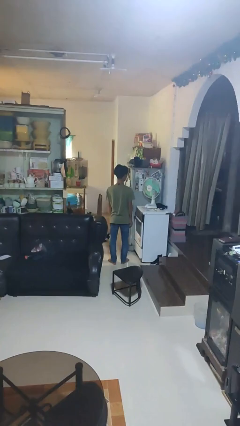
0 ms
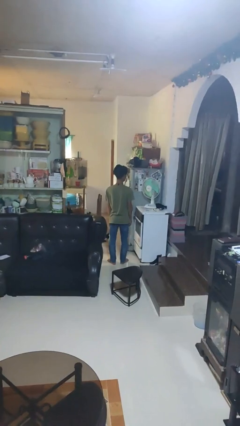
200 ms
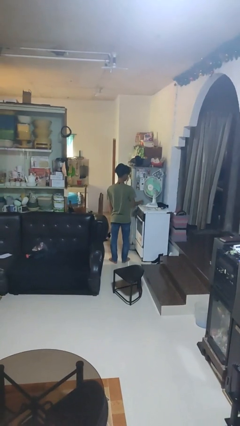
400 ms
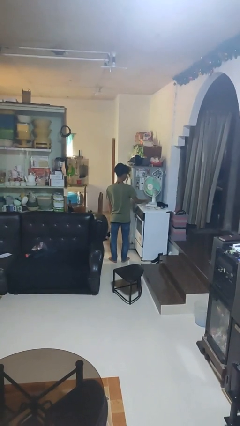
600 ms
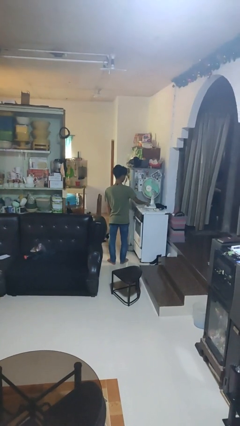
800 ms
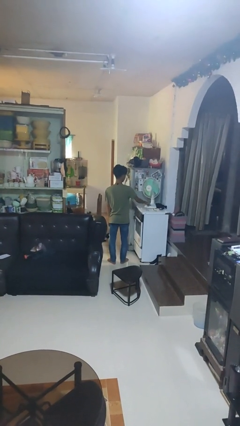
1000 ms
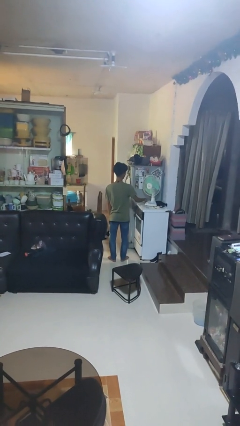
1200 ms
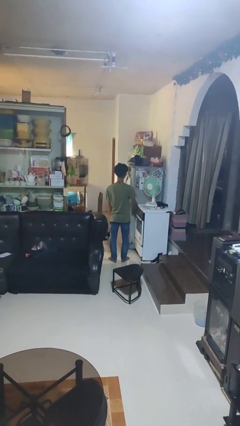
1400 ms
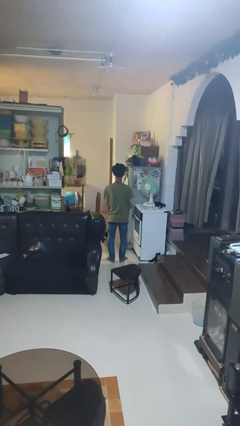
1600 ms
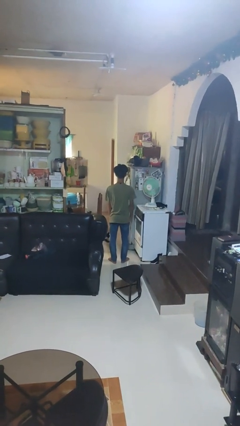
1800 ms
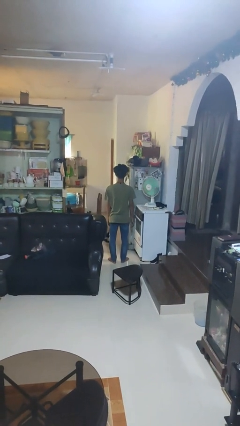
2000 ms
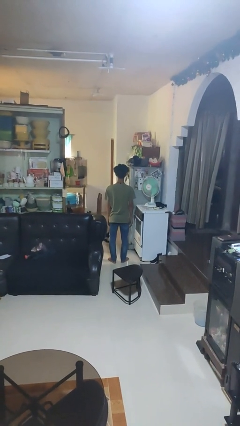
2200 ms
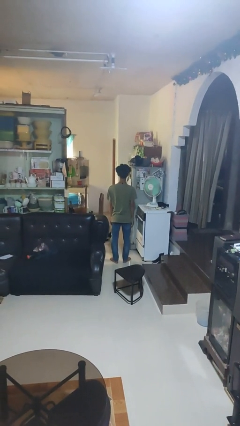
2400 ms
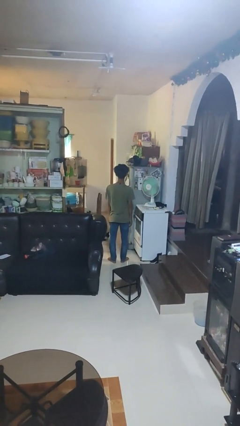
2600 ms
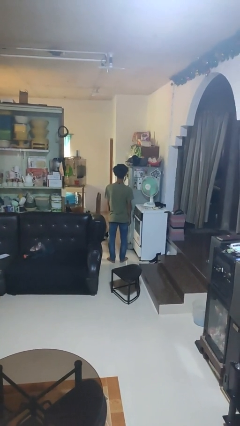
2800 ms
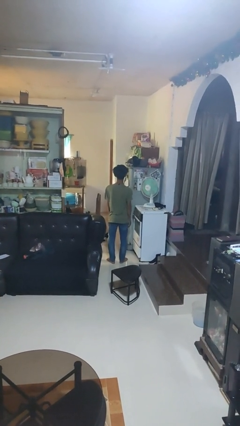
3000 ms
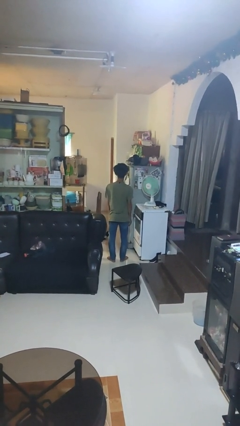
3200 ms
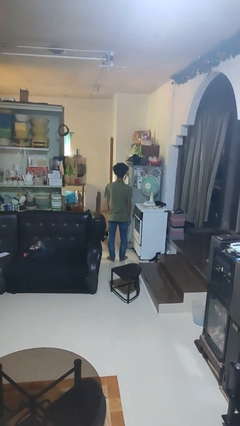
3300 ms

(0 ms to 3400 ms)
person turns on fan

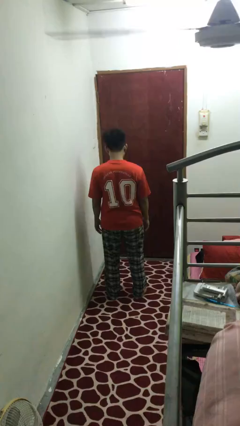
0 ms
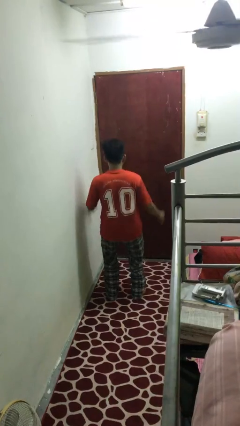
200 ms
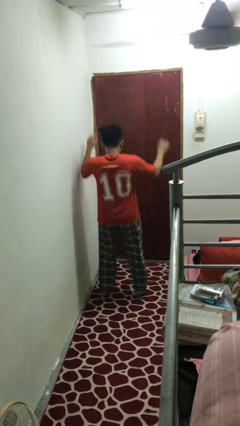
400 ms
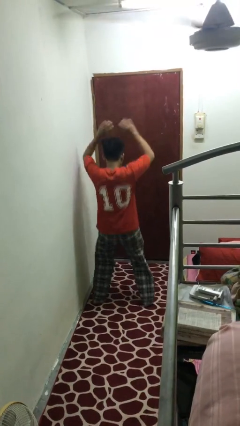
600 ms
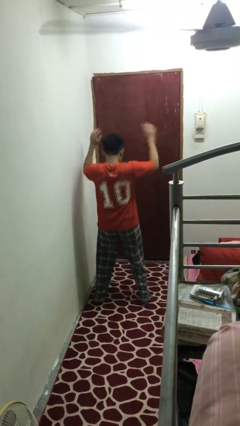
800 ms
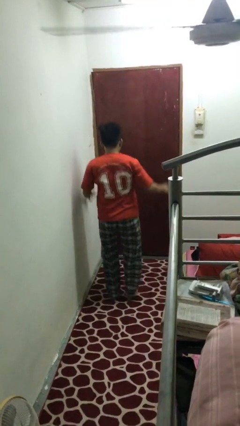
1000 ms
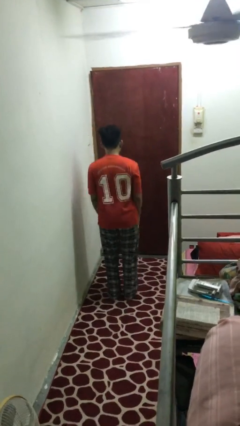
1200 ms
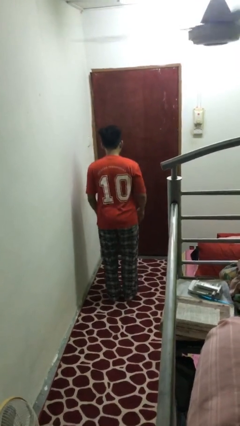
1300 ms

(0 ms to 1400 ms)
person exercises with jumping jacks

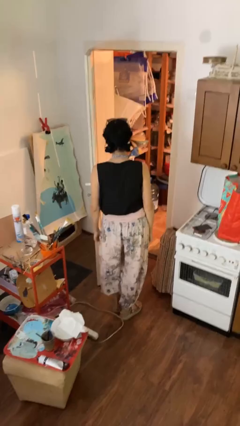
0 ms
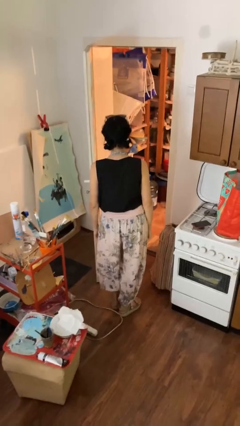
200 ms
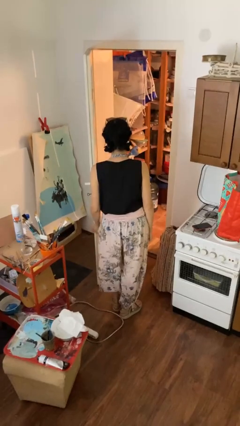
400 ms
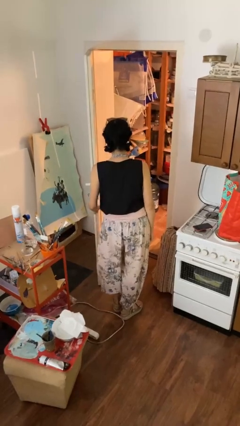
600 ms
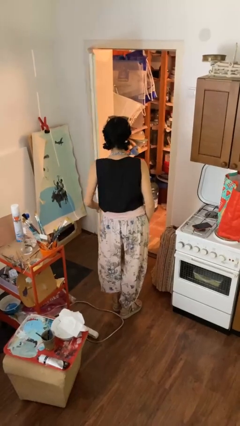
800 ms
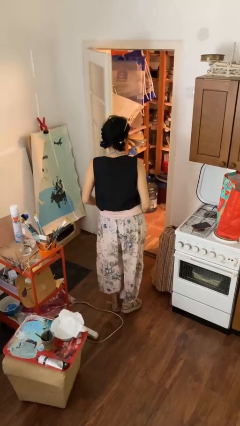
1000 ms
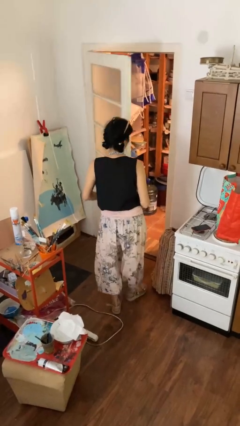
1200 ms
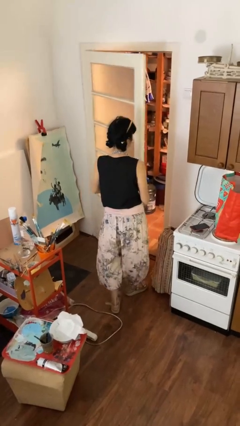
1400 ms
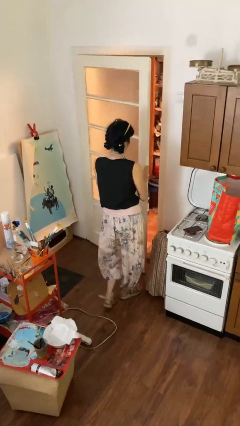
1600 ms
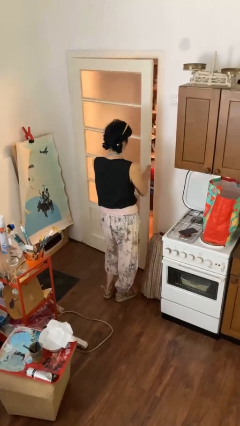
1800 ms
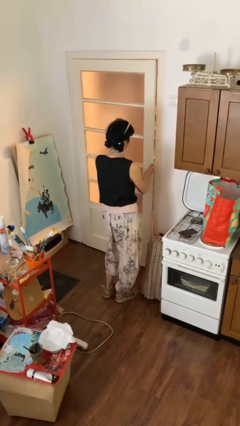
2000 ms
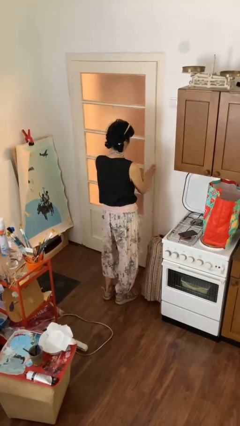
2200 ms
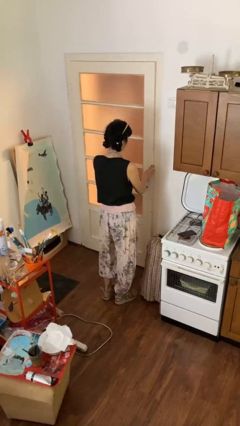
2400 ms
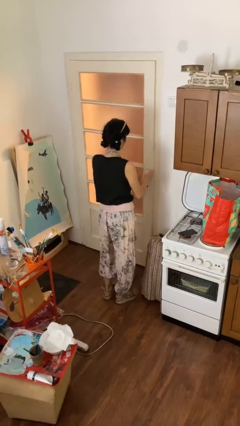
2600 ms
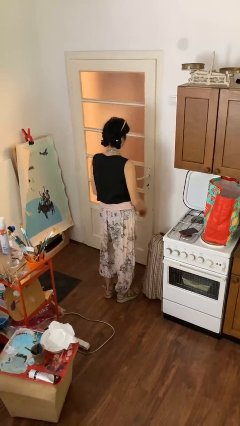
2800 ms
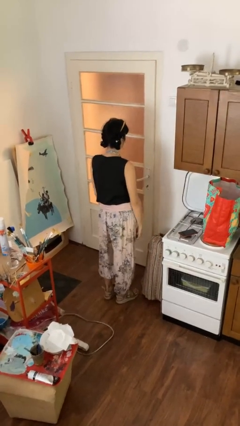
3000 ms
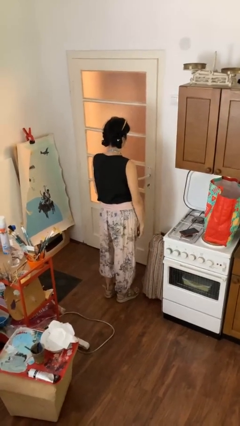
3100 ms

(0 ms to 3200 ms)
person closes facility door

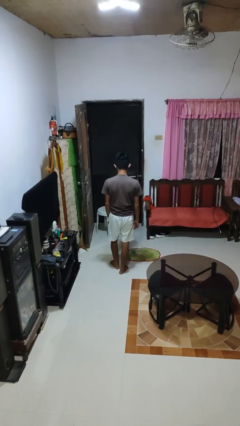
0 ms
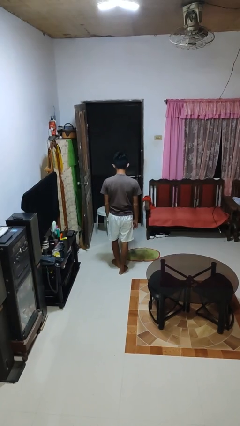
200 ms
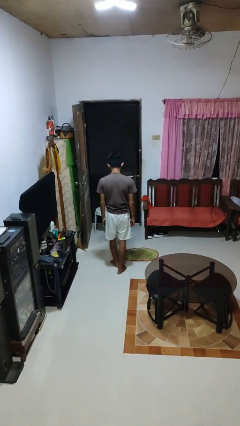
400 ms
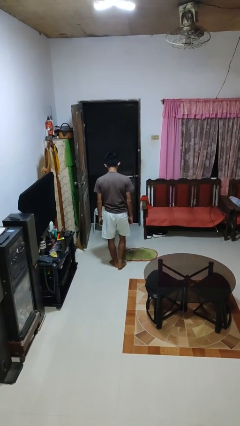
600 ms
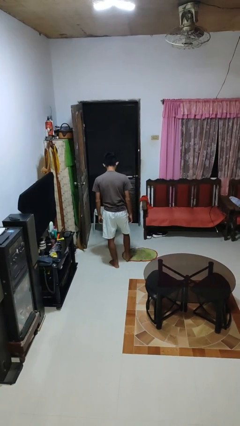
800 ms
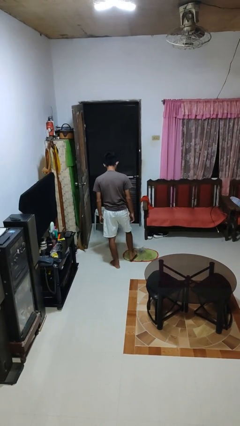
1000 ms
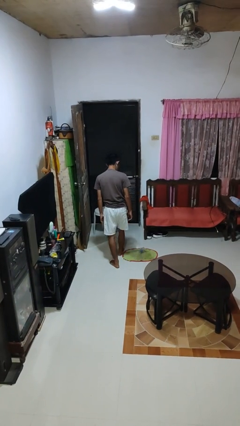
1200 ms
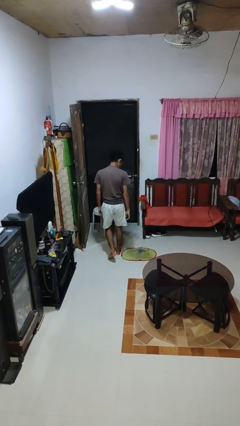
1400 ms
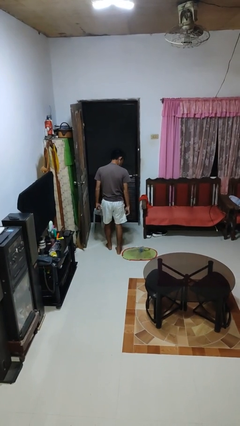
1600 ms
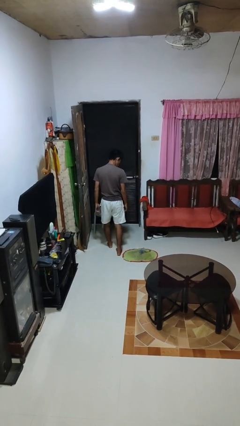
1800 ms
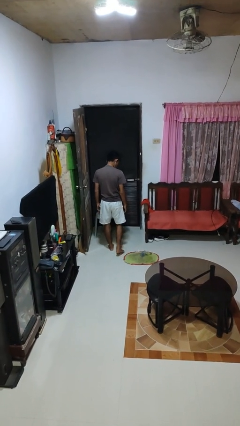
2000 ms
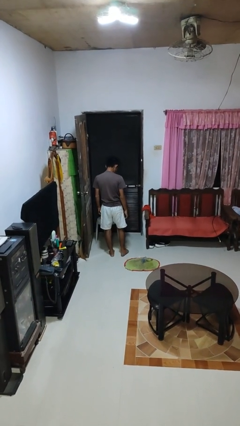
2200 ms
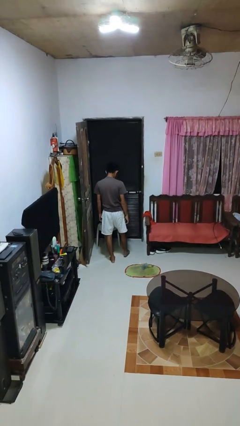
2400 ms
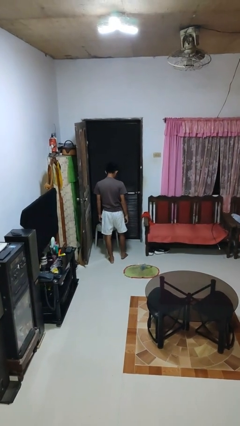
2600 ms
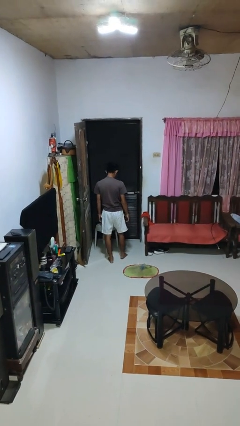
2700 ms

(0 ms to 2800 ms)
person spills on floor

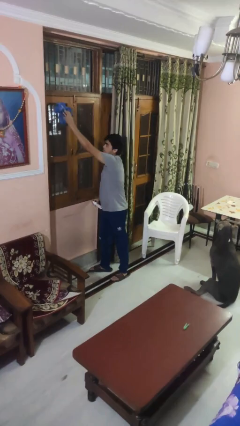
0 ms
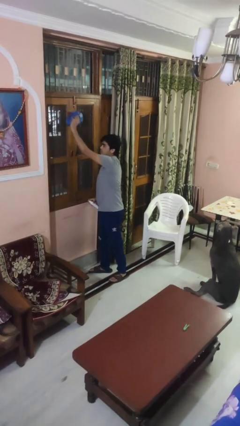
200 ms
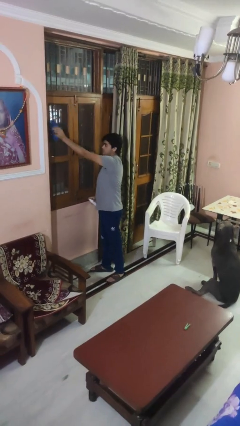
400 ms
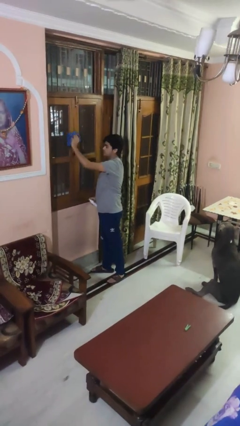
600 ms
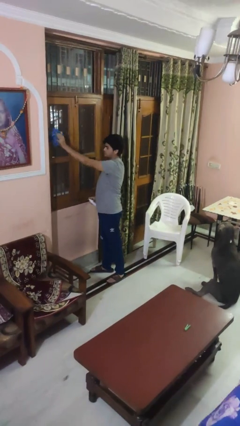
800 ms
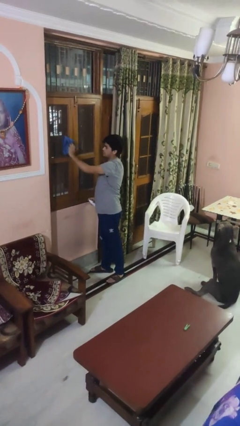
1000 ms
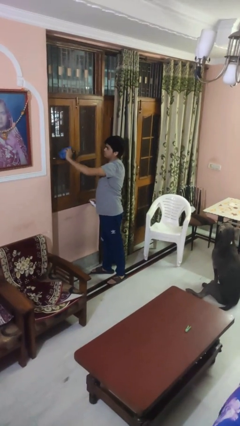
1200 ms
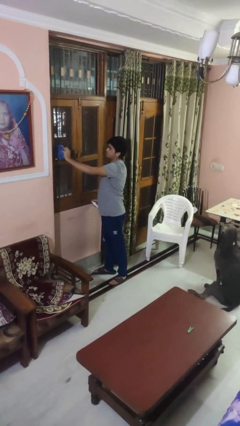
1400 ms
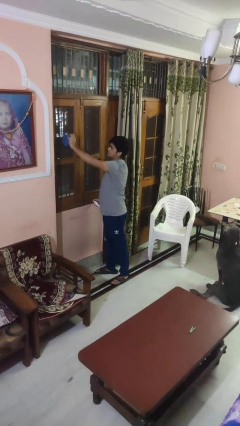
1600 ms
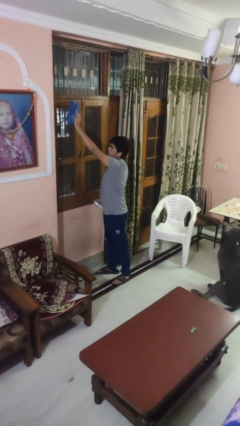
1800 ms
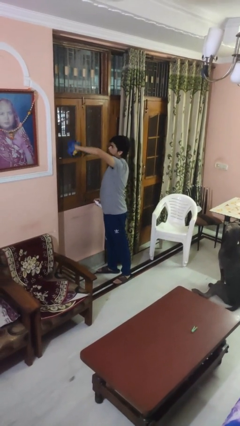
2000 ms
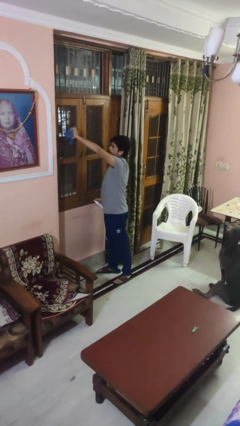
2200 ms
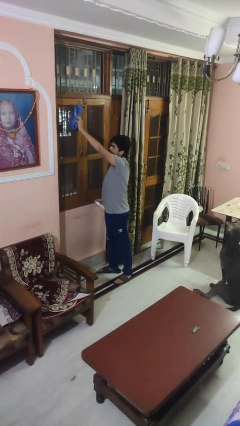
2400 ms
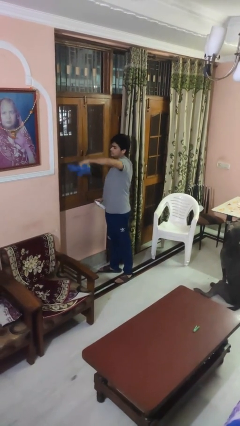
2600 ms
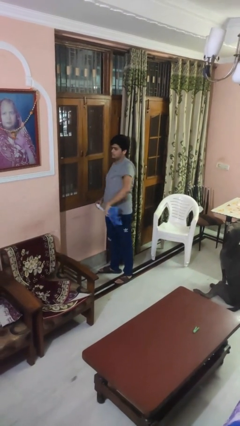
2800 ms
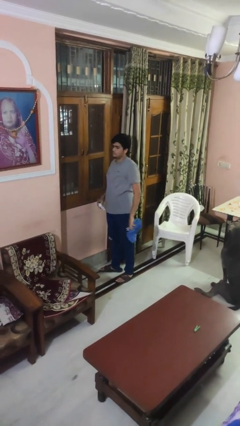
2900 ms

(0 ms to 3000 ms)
person washes window

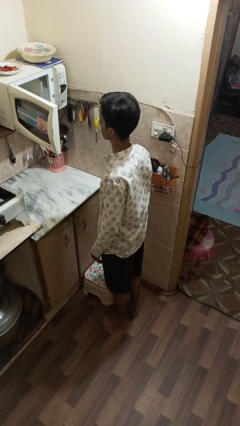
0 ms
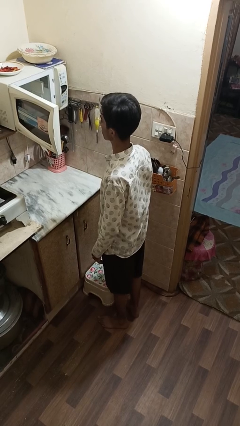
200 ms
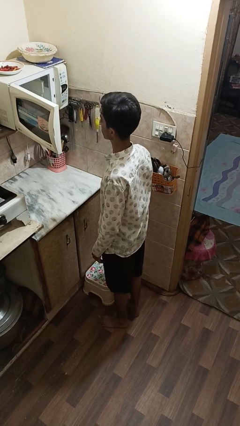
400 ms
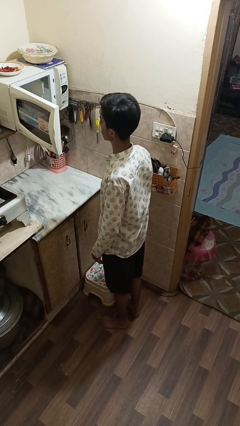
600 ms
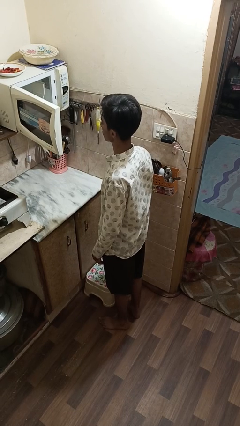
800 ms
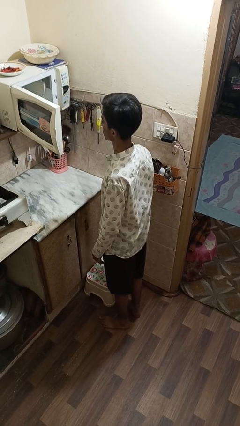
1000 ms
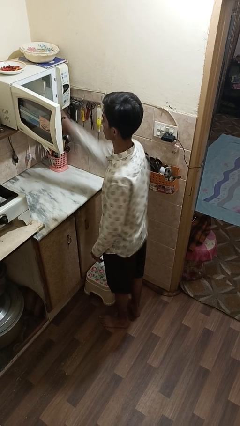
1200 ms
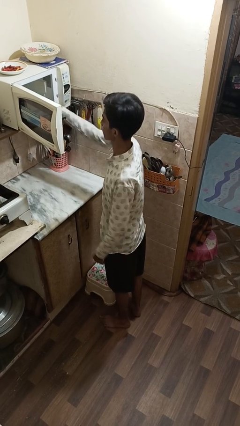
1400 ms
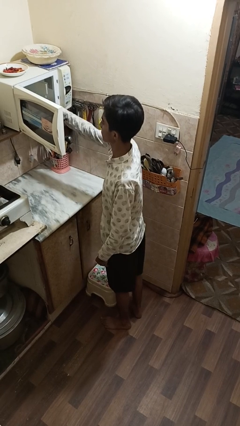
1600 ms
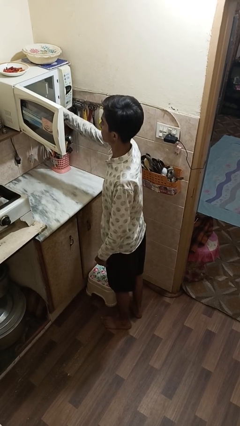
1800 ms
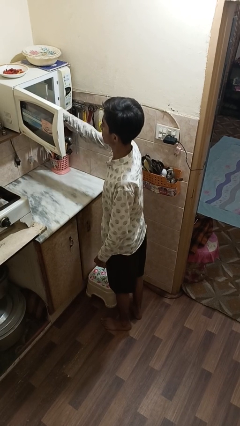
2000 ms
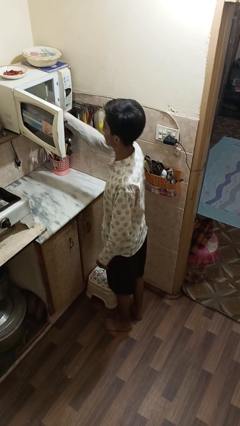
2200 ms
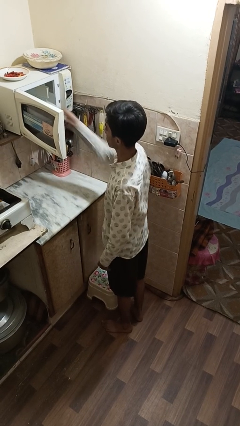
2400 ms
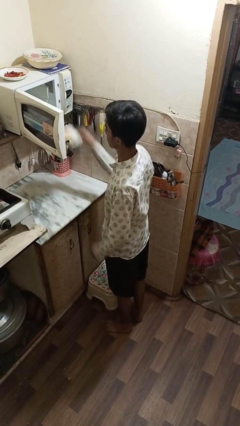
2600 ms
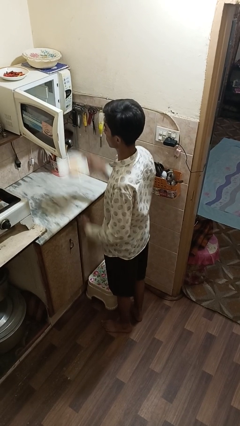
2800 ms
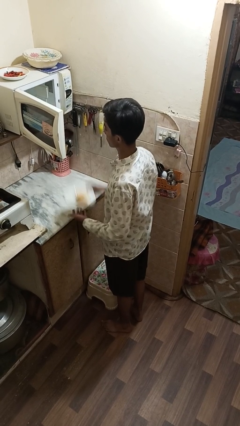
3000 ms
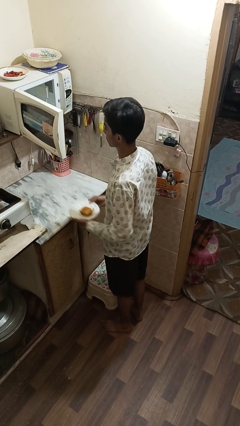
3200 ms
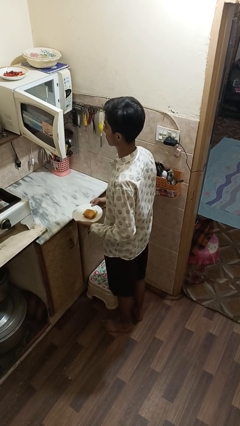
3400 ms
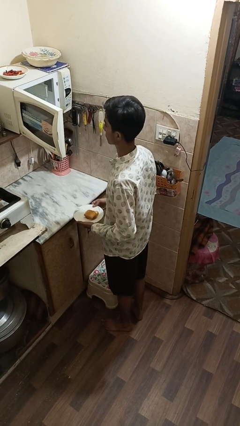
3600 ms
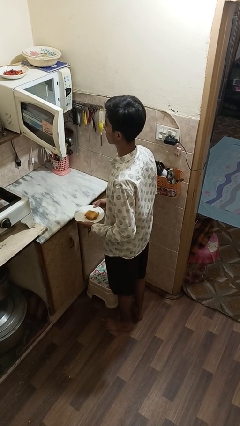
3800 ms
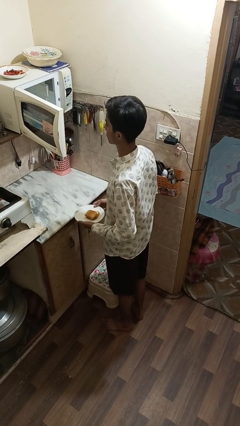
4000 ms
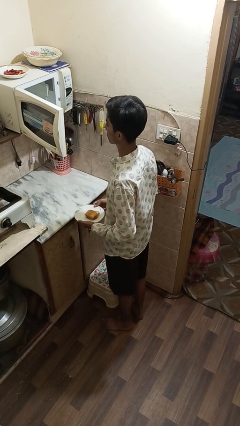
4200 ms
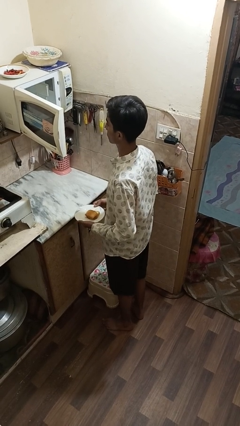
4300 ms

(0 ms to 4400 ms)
person takes object from microwave
